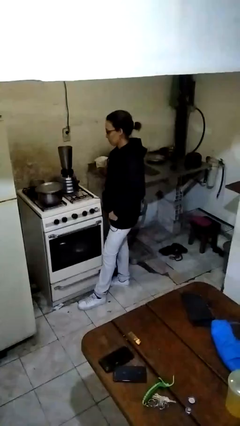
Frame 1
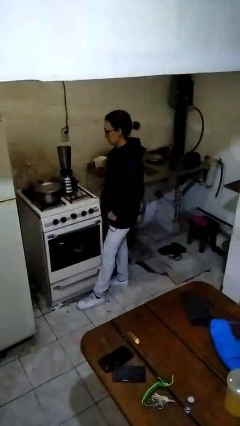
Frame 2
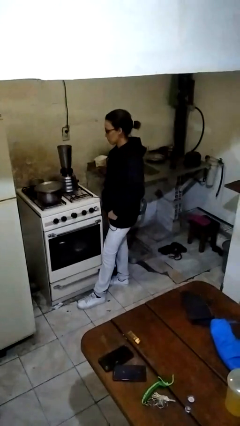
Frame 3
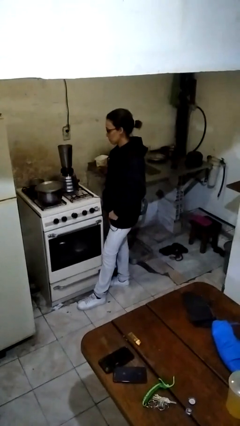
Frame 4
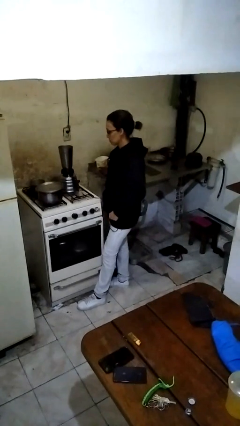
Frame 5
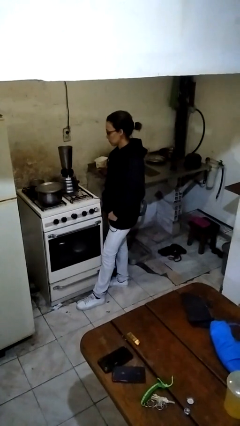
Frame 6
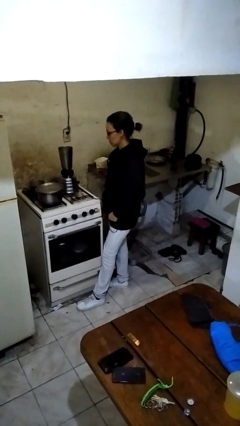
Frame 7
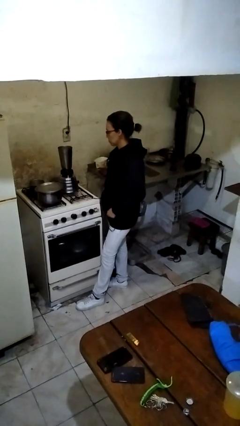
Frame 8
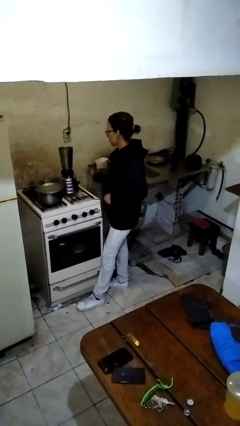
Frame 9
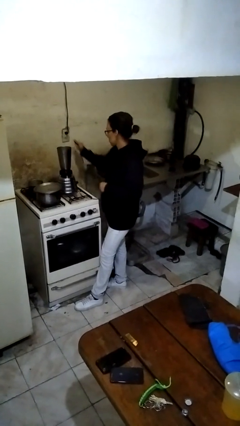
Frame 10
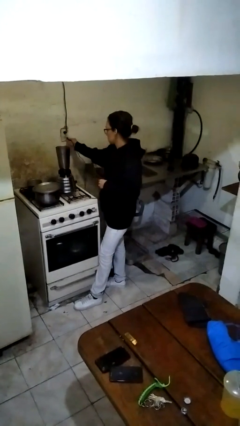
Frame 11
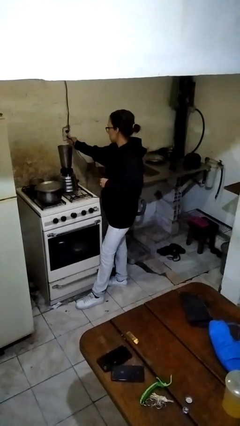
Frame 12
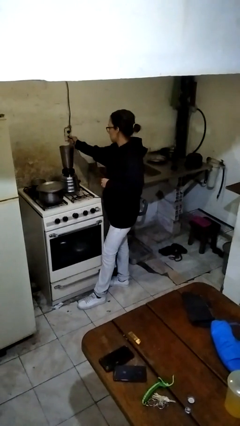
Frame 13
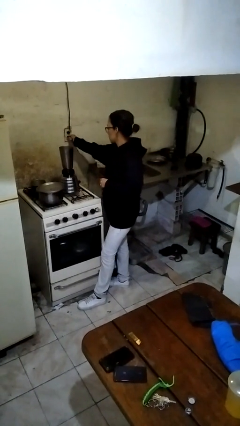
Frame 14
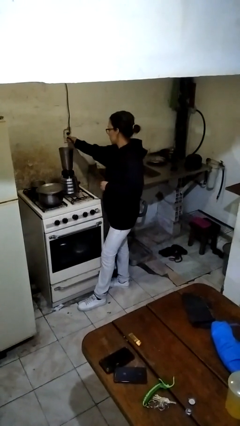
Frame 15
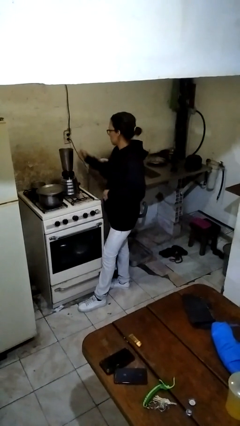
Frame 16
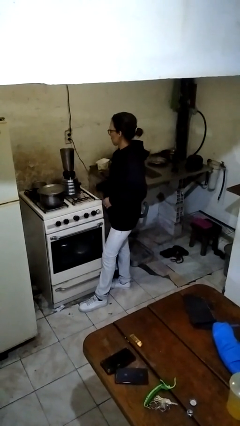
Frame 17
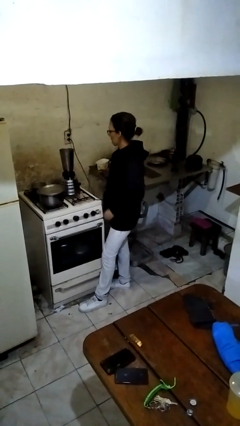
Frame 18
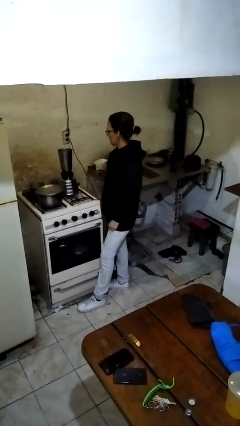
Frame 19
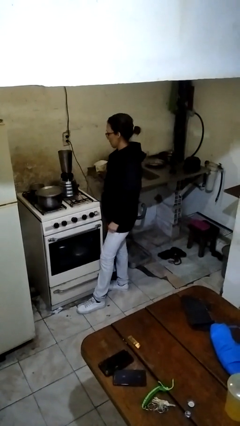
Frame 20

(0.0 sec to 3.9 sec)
person plugs into electrical socket

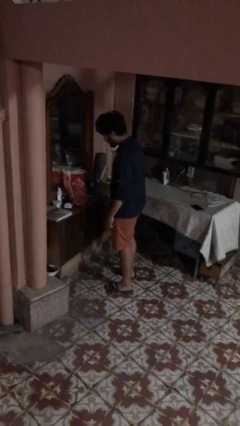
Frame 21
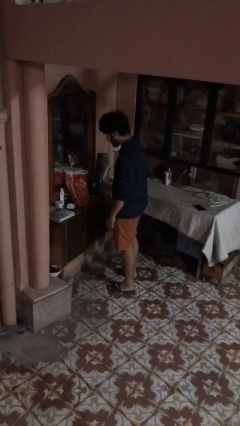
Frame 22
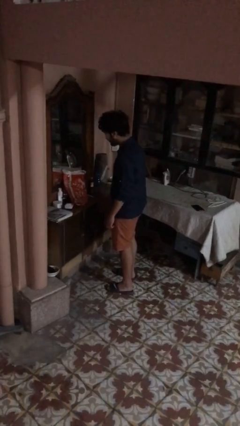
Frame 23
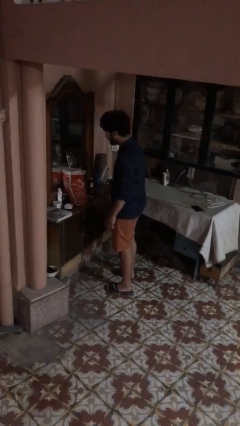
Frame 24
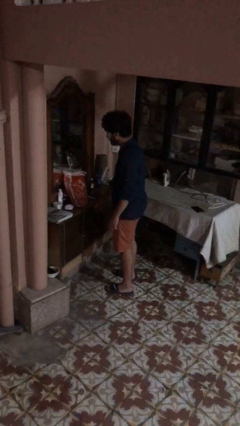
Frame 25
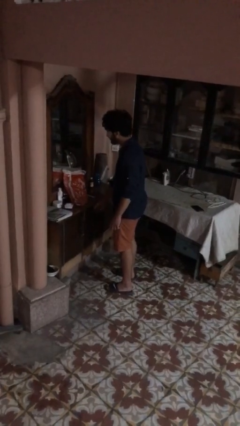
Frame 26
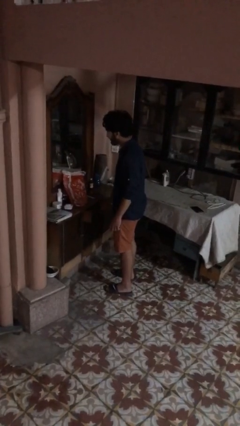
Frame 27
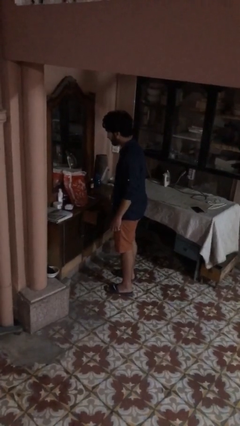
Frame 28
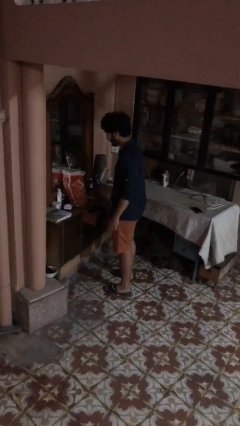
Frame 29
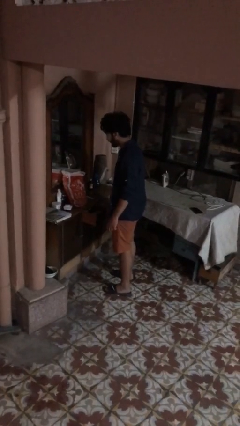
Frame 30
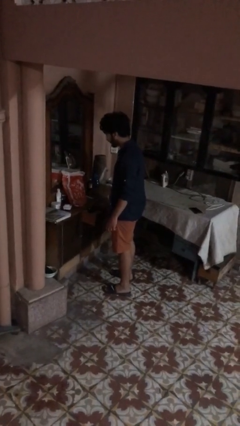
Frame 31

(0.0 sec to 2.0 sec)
person opens dresser drawer

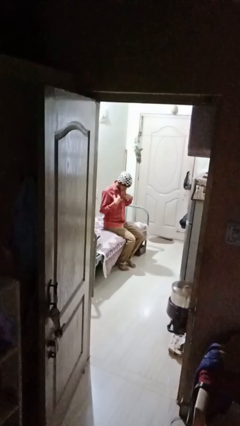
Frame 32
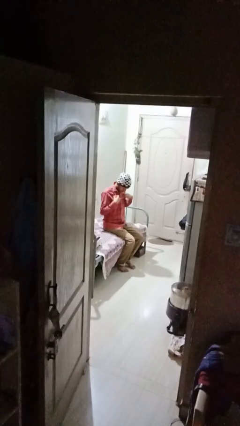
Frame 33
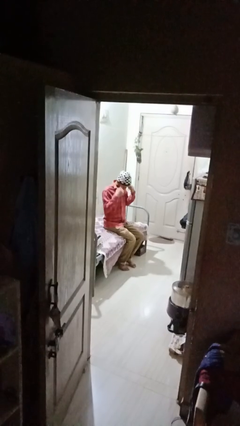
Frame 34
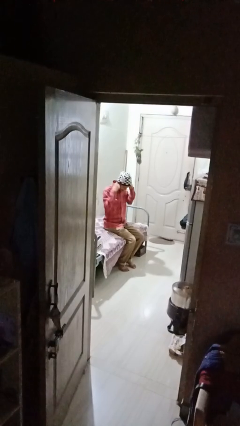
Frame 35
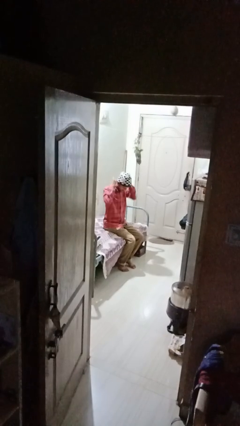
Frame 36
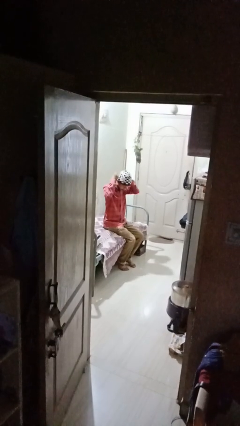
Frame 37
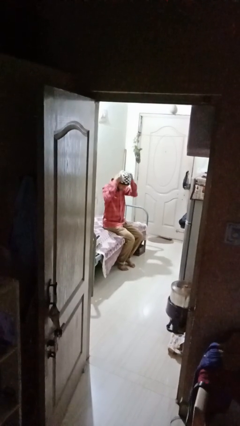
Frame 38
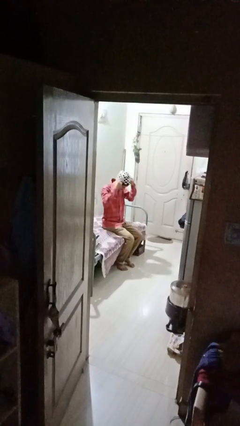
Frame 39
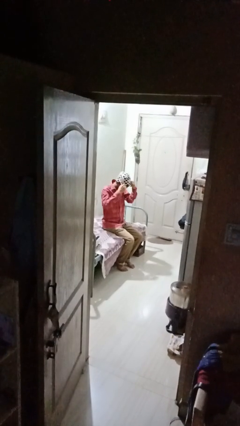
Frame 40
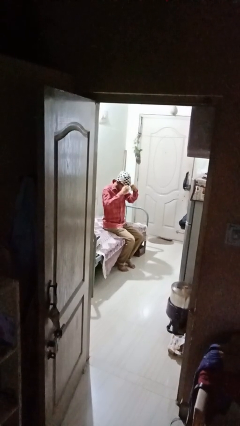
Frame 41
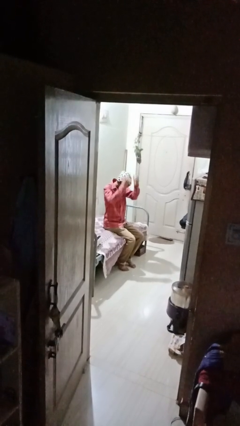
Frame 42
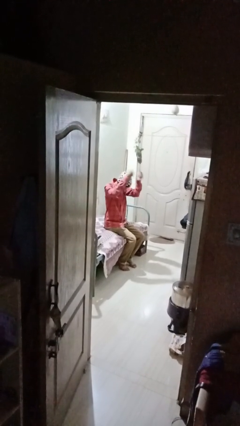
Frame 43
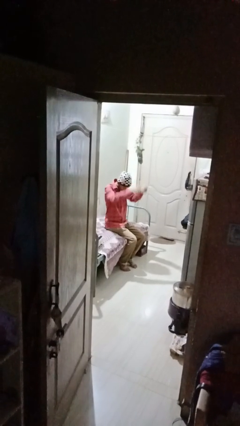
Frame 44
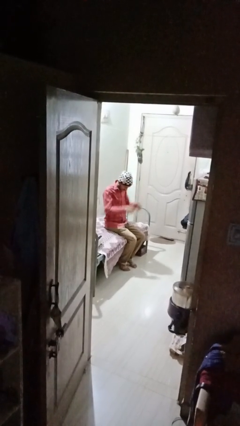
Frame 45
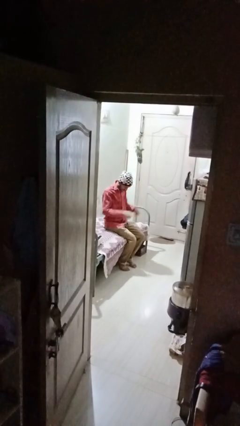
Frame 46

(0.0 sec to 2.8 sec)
person takes off necklace

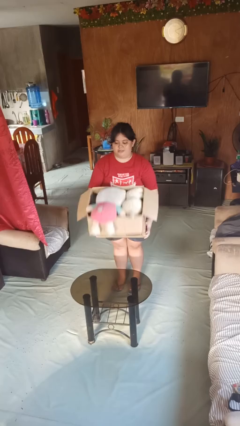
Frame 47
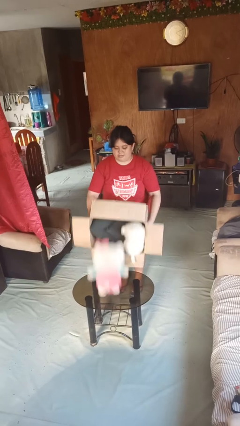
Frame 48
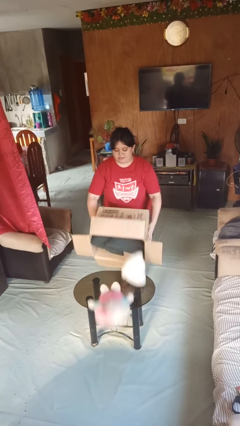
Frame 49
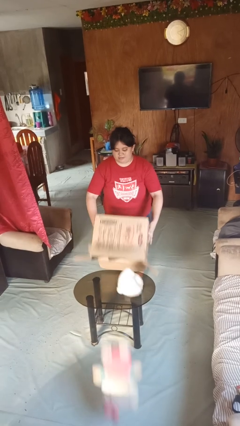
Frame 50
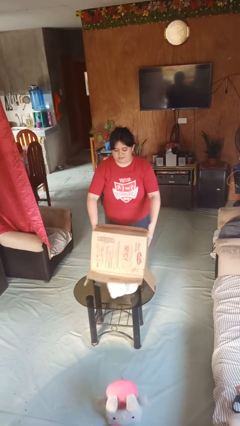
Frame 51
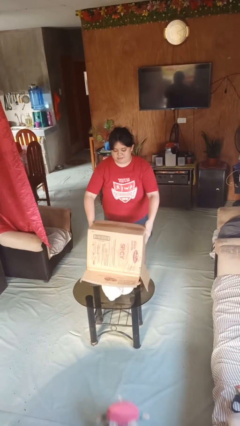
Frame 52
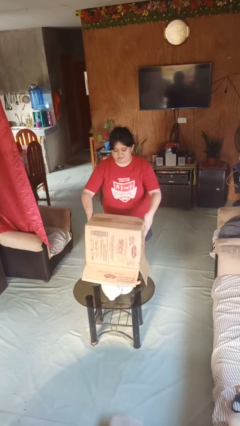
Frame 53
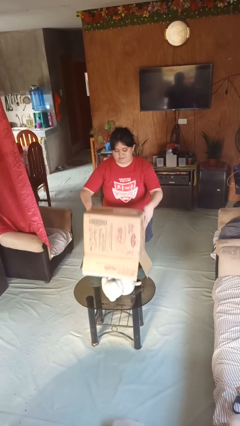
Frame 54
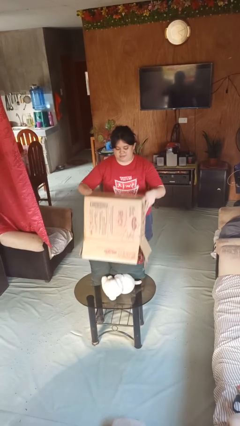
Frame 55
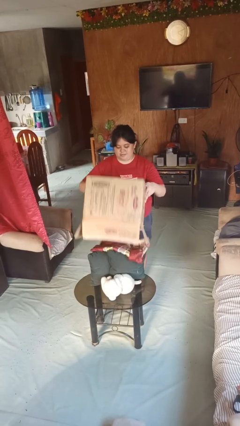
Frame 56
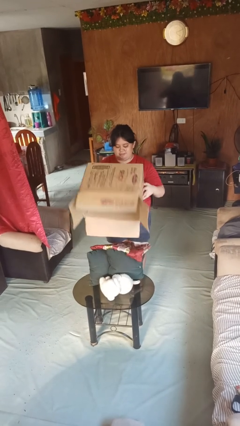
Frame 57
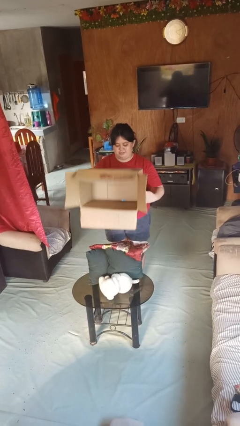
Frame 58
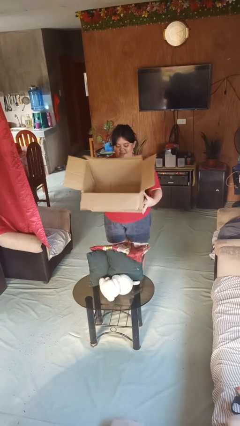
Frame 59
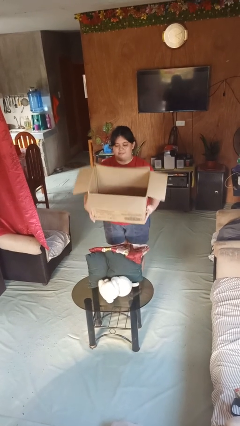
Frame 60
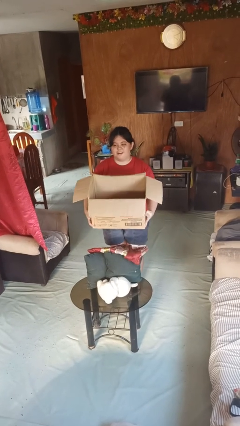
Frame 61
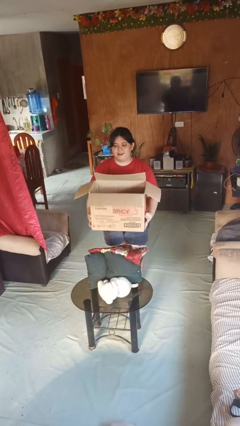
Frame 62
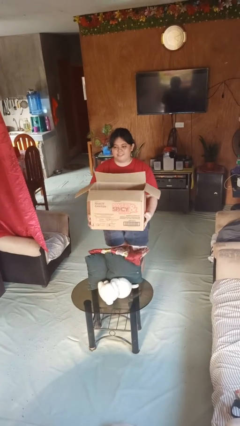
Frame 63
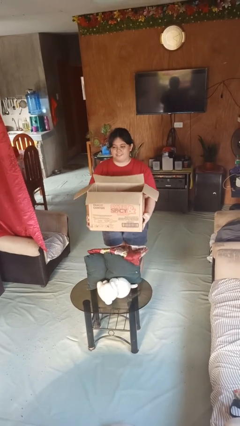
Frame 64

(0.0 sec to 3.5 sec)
person unloads box onto table

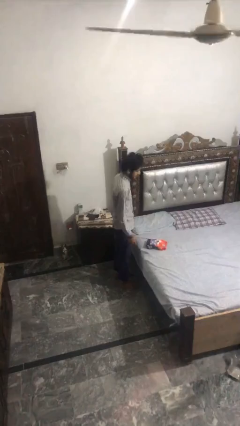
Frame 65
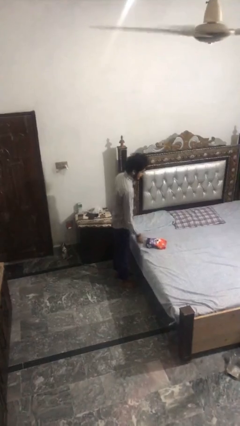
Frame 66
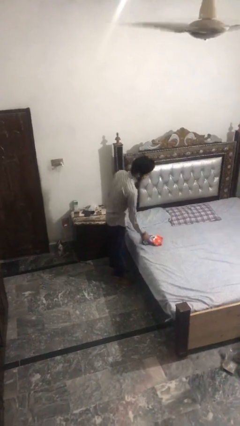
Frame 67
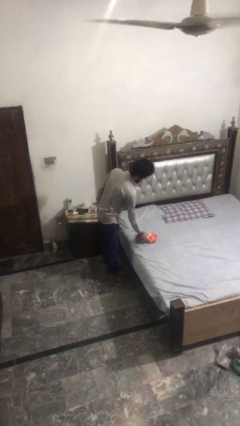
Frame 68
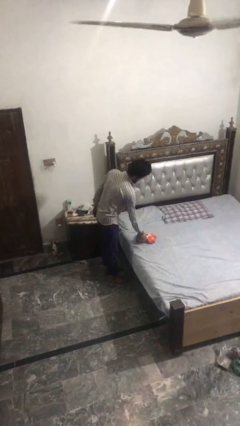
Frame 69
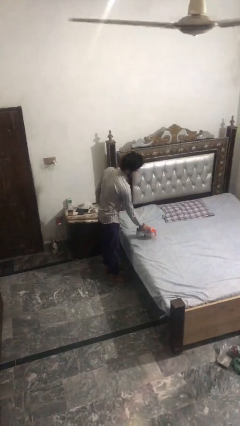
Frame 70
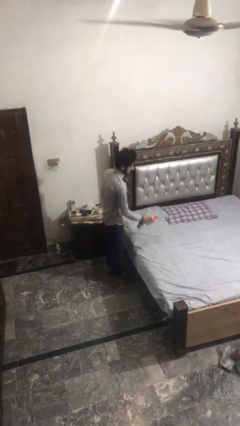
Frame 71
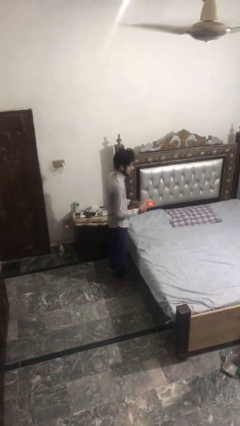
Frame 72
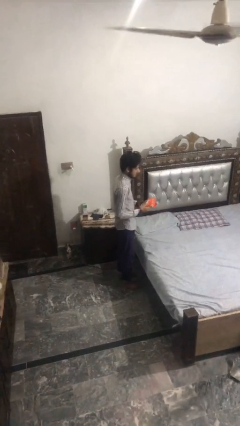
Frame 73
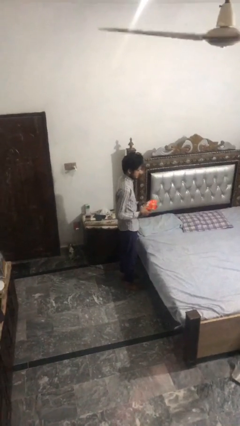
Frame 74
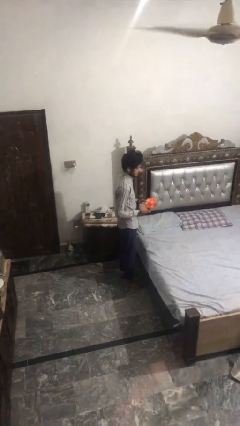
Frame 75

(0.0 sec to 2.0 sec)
person picks up object from bed

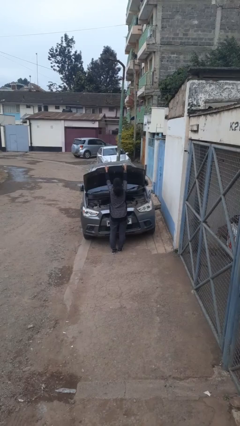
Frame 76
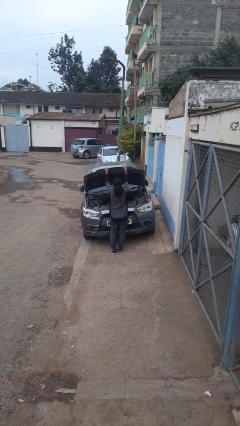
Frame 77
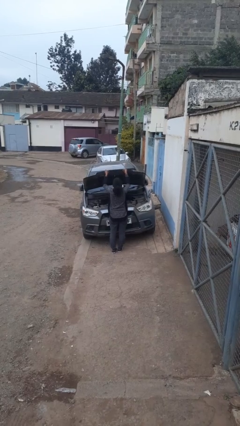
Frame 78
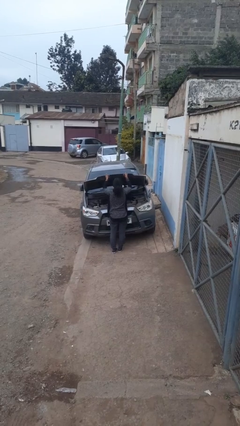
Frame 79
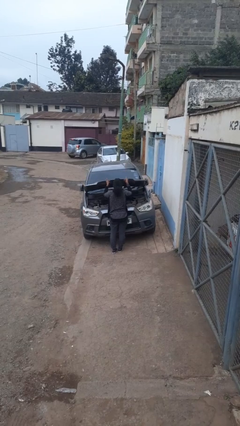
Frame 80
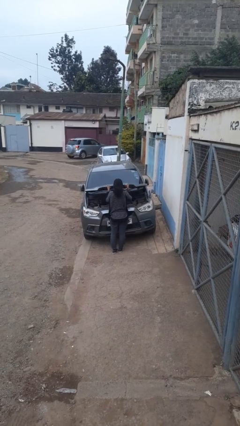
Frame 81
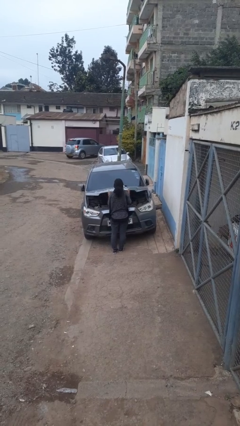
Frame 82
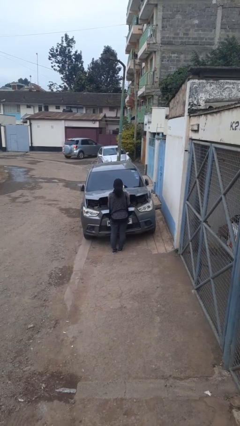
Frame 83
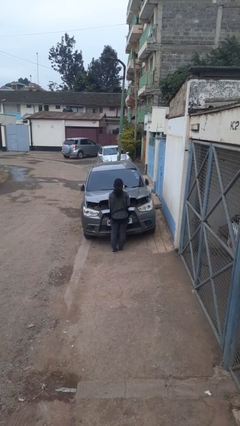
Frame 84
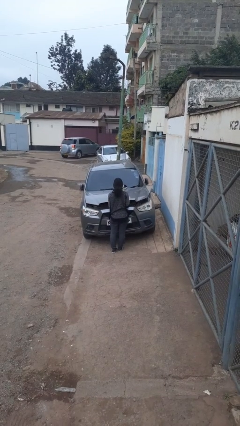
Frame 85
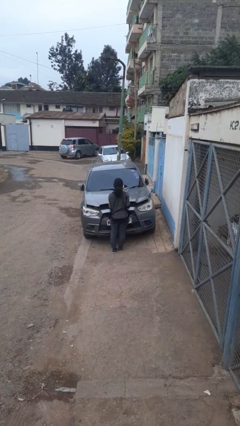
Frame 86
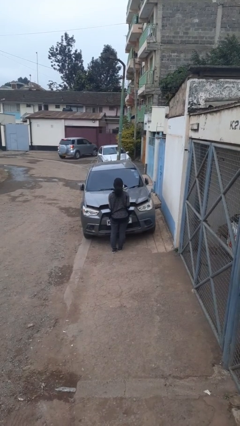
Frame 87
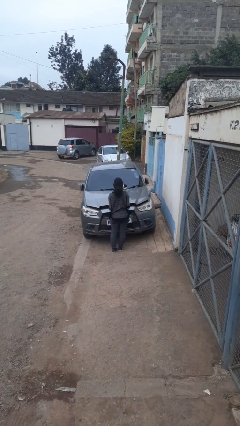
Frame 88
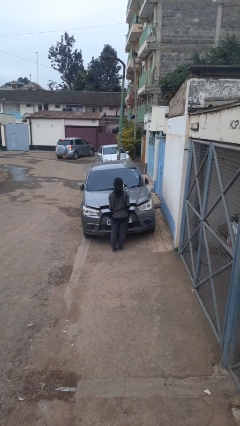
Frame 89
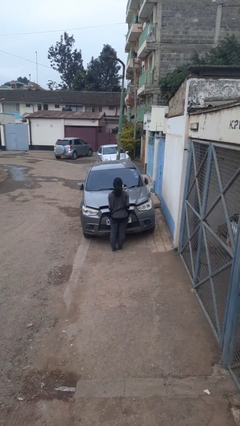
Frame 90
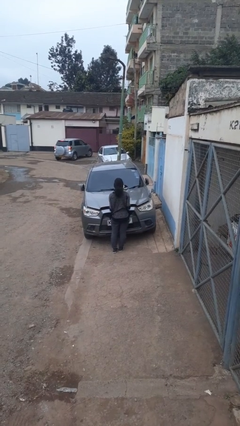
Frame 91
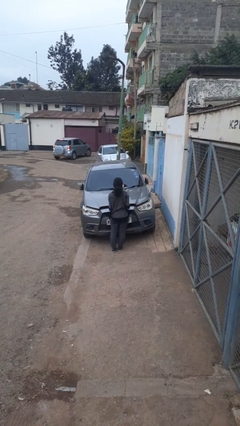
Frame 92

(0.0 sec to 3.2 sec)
person closes car hood

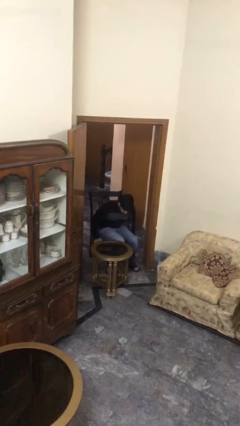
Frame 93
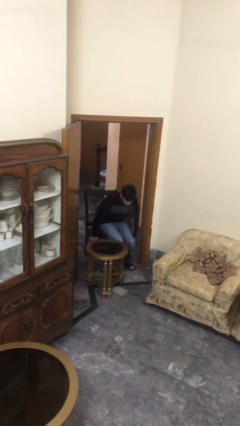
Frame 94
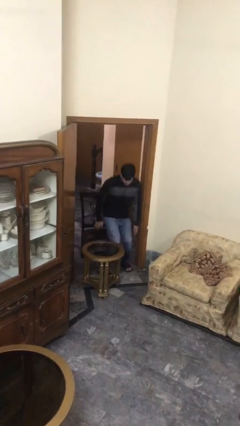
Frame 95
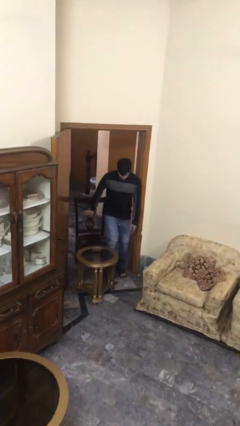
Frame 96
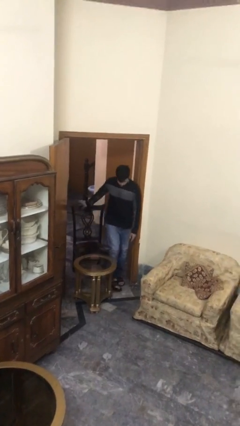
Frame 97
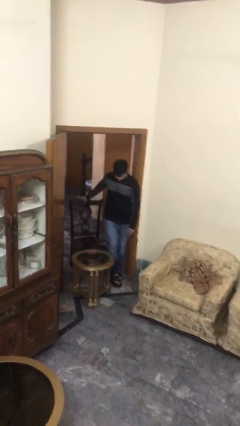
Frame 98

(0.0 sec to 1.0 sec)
person stands up
